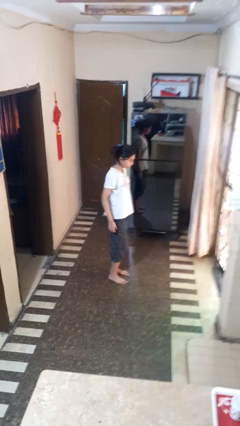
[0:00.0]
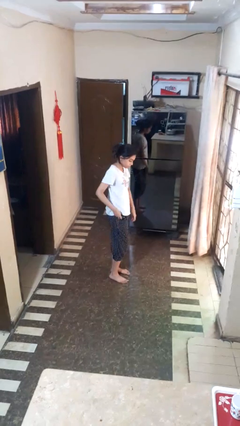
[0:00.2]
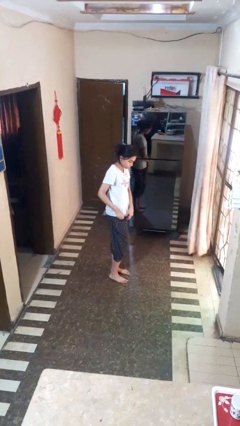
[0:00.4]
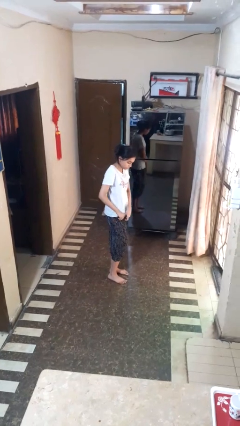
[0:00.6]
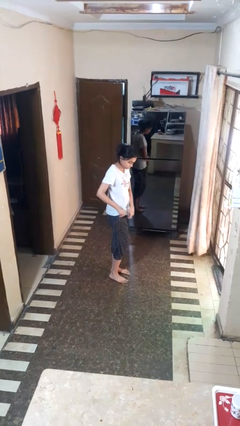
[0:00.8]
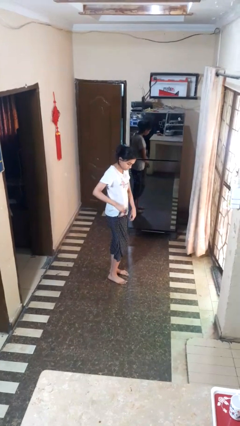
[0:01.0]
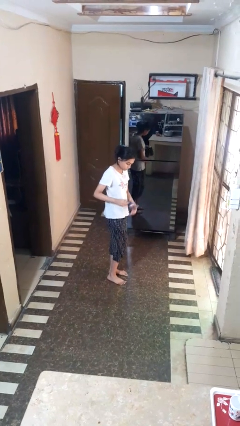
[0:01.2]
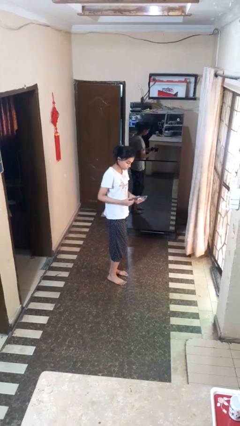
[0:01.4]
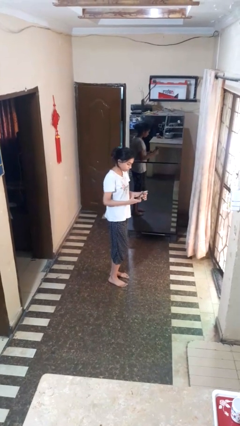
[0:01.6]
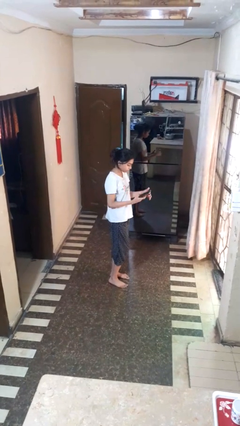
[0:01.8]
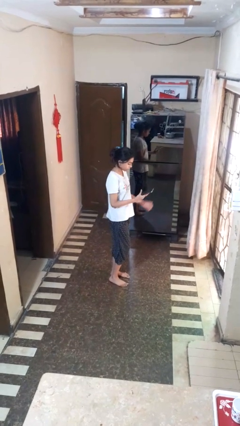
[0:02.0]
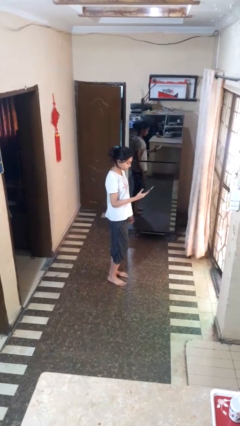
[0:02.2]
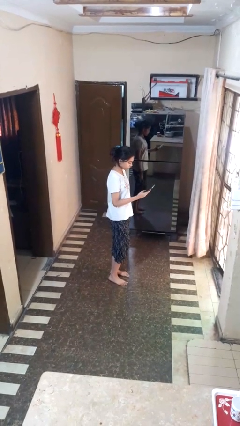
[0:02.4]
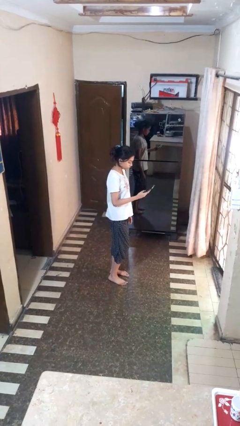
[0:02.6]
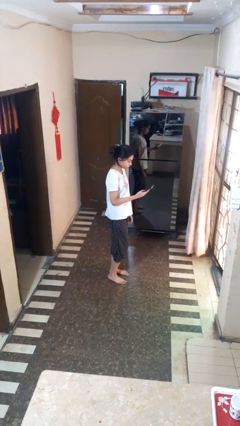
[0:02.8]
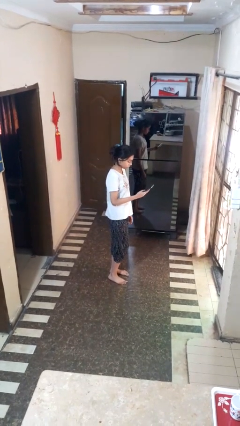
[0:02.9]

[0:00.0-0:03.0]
person takes phone from pocket

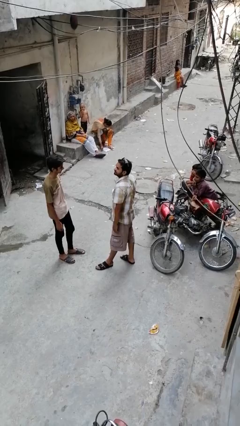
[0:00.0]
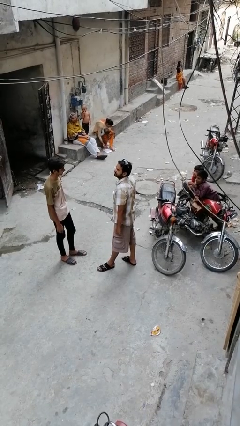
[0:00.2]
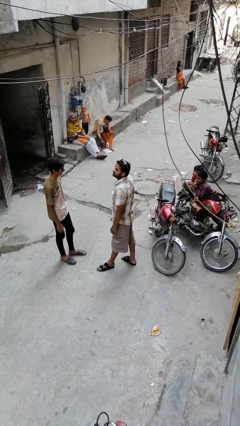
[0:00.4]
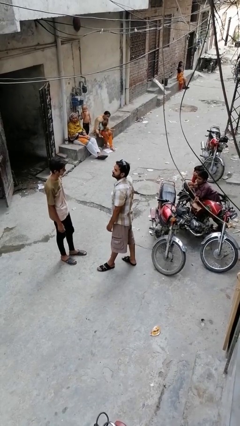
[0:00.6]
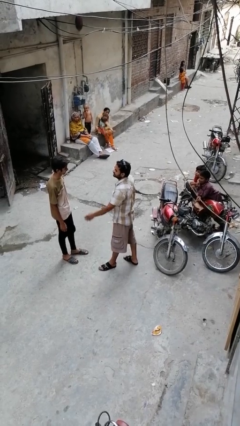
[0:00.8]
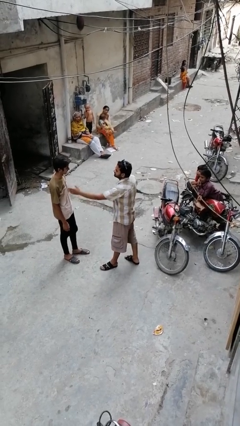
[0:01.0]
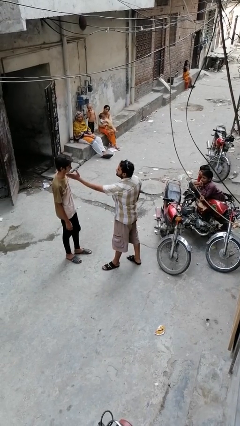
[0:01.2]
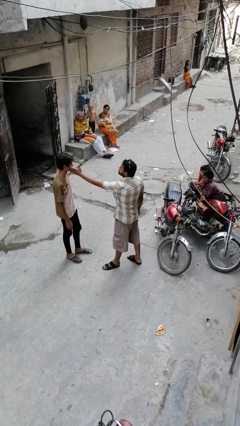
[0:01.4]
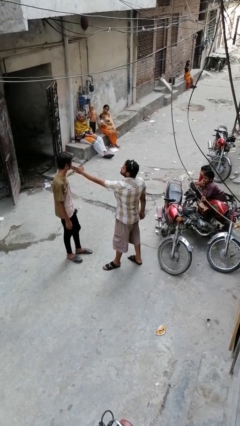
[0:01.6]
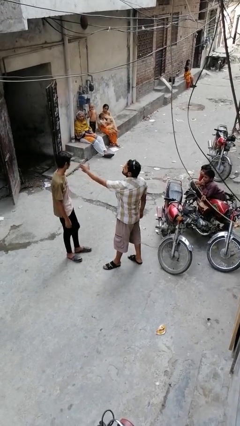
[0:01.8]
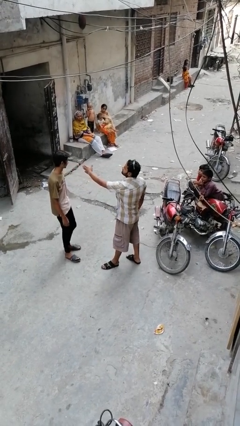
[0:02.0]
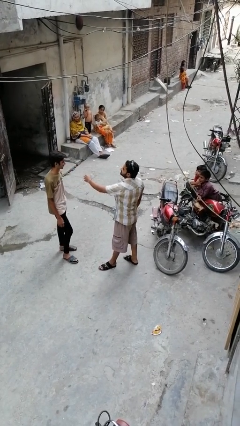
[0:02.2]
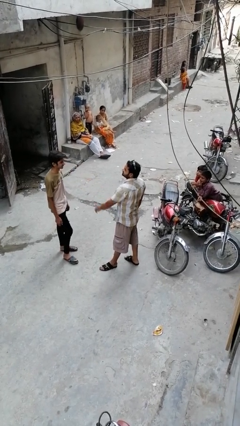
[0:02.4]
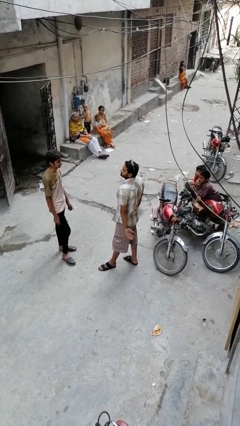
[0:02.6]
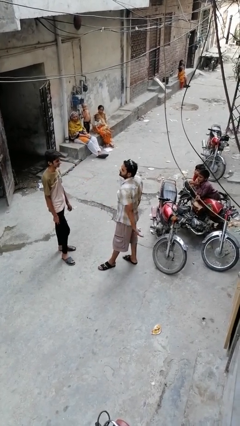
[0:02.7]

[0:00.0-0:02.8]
person touches face of person

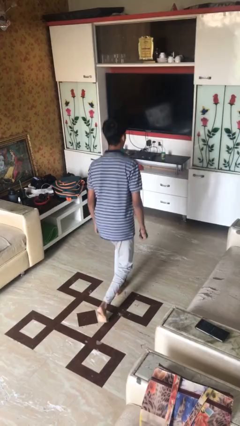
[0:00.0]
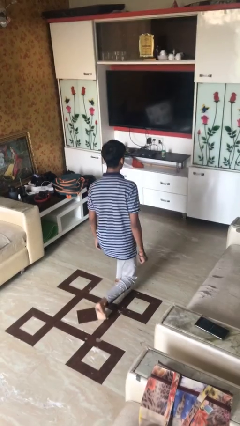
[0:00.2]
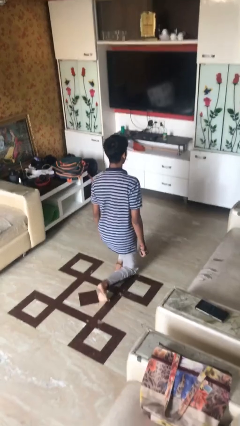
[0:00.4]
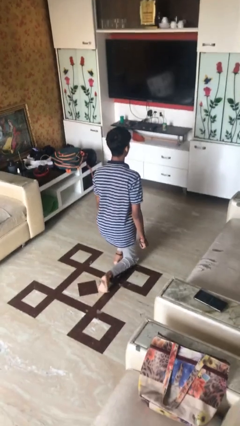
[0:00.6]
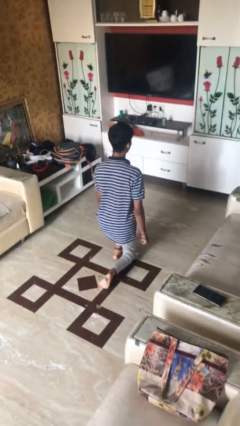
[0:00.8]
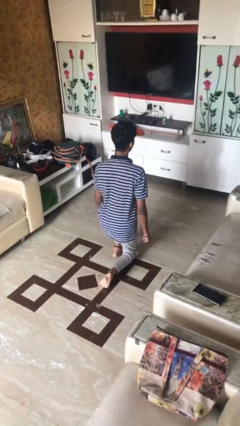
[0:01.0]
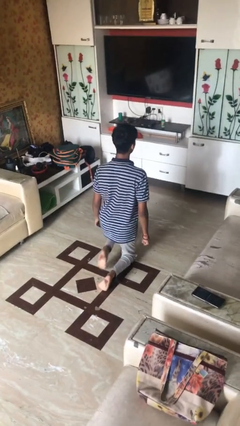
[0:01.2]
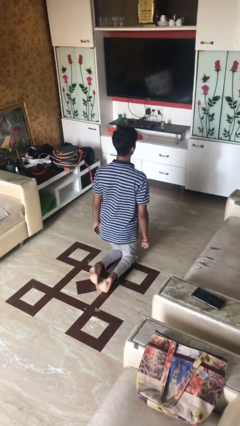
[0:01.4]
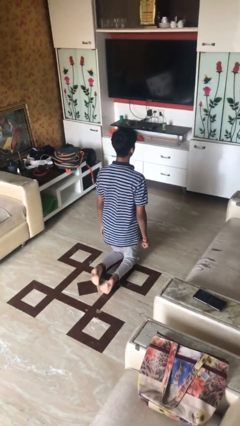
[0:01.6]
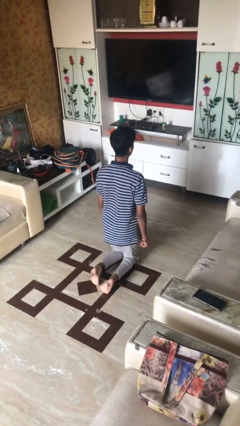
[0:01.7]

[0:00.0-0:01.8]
person kneels

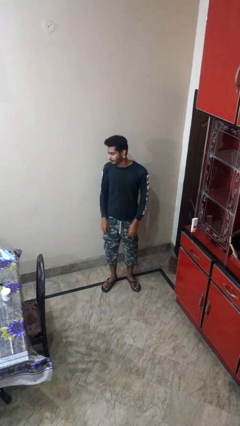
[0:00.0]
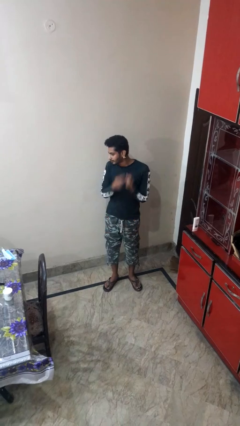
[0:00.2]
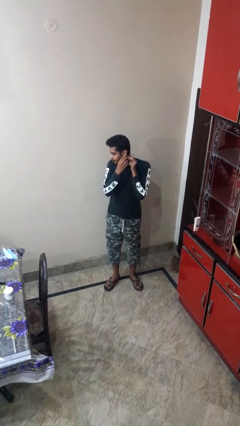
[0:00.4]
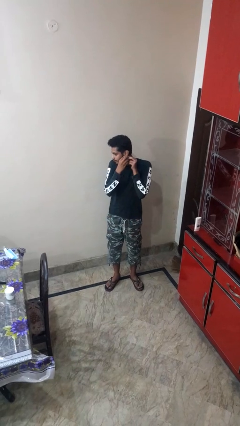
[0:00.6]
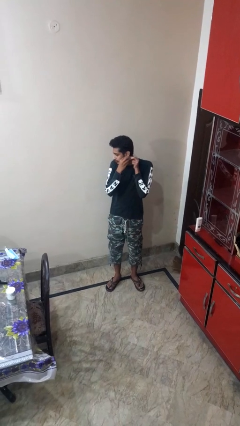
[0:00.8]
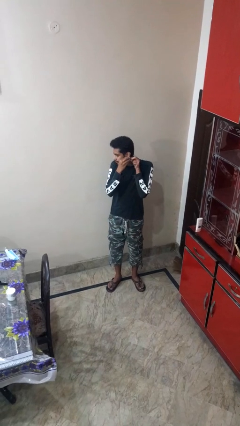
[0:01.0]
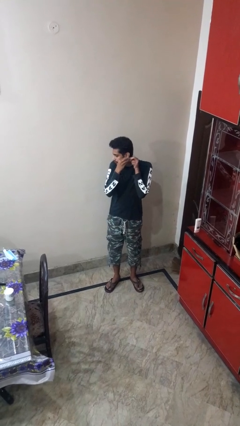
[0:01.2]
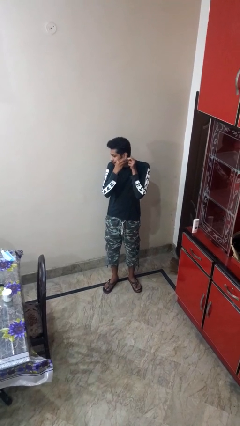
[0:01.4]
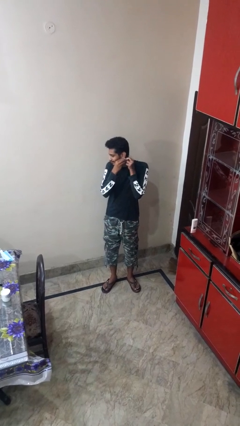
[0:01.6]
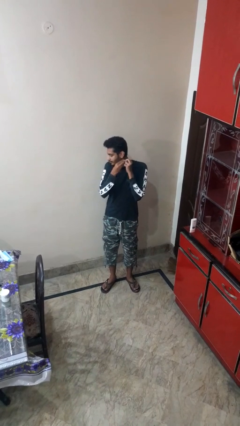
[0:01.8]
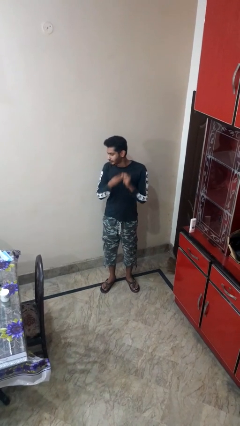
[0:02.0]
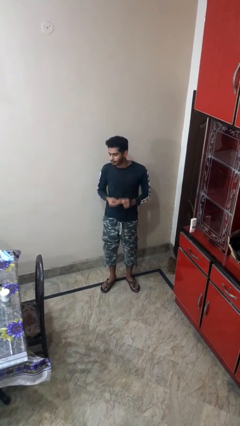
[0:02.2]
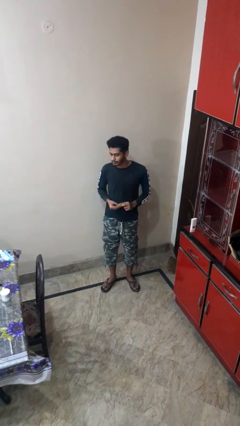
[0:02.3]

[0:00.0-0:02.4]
person takes off earrings

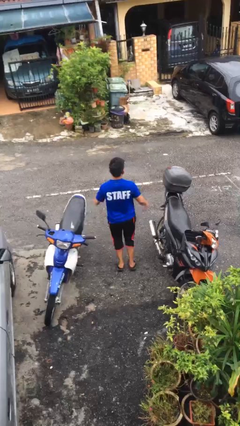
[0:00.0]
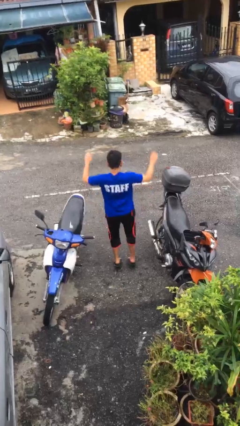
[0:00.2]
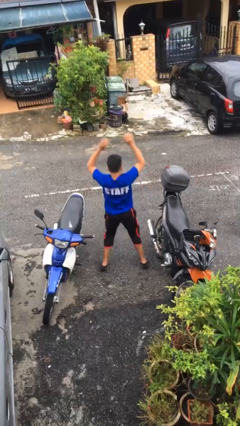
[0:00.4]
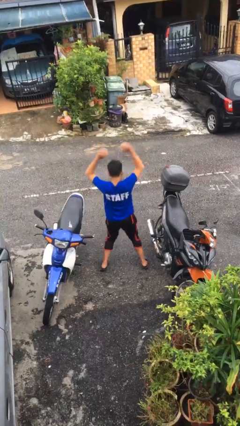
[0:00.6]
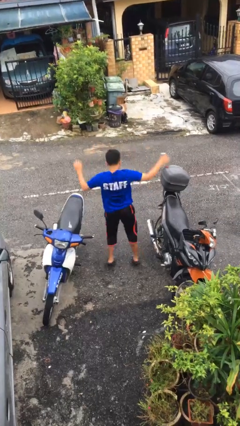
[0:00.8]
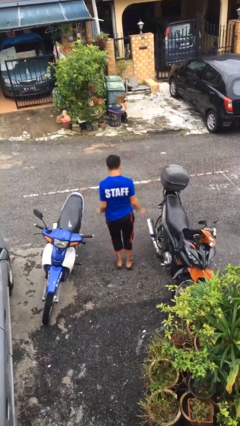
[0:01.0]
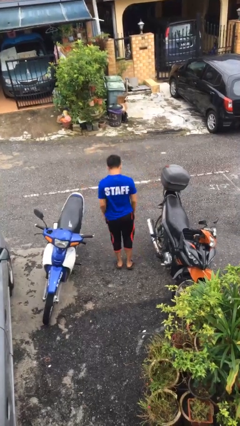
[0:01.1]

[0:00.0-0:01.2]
person exercises with jumping jacks

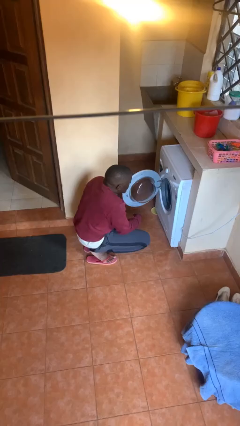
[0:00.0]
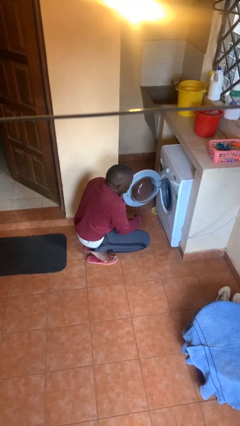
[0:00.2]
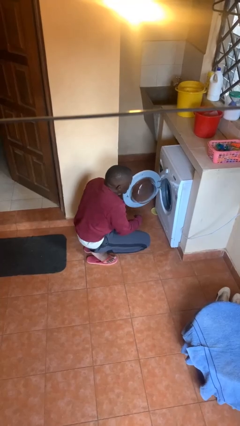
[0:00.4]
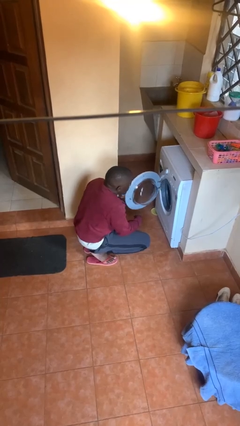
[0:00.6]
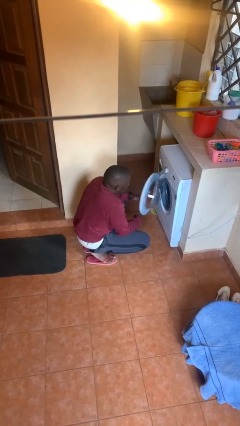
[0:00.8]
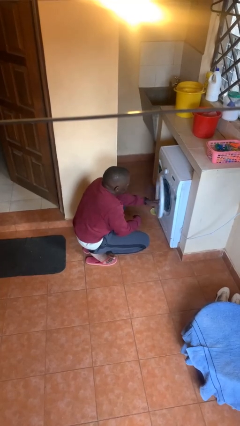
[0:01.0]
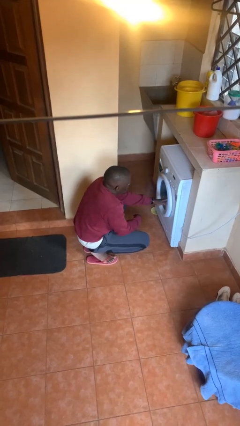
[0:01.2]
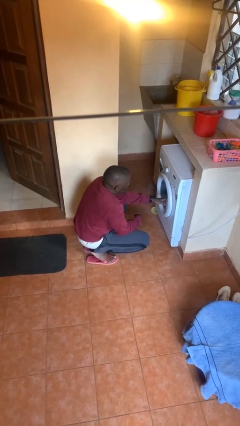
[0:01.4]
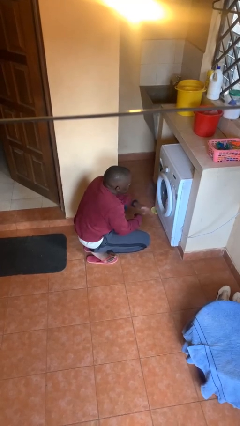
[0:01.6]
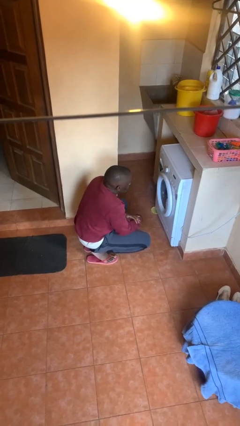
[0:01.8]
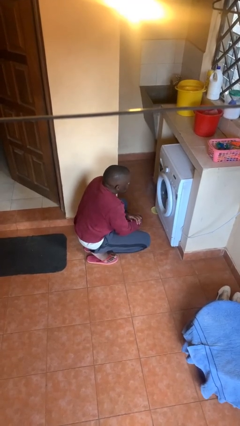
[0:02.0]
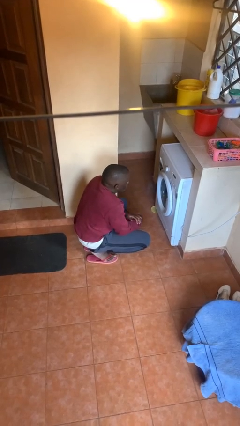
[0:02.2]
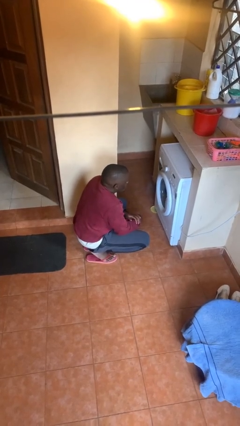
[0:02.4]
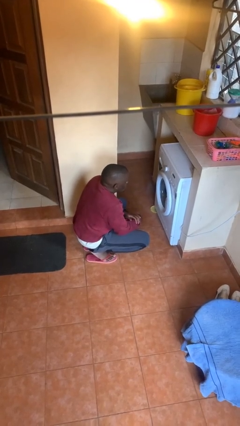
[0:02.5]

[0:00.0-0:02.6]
person closes clothes washer

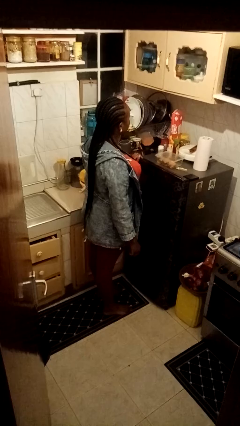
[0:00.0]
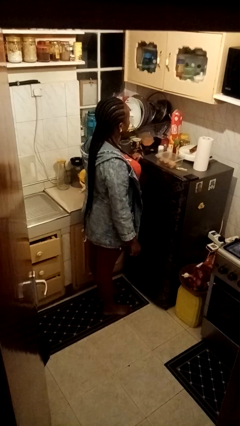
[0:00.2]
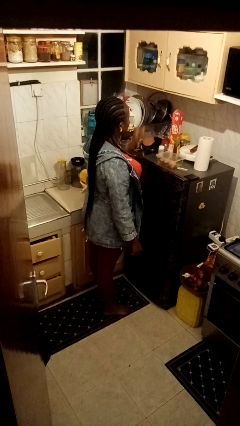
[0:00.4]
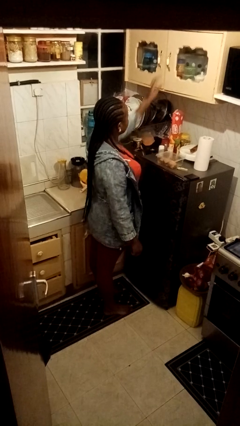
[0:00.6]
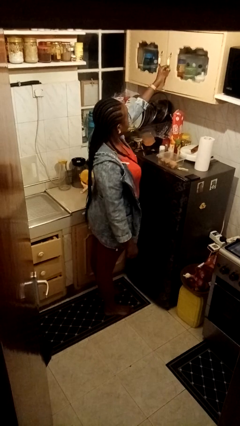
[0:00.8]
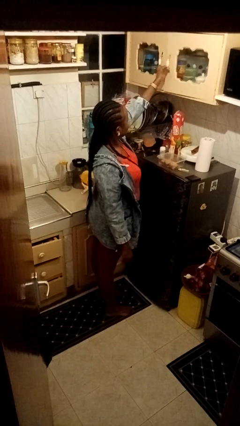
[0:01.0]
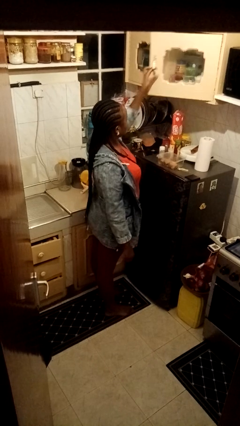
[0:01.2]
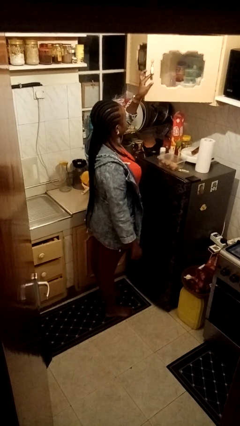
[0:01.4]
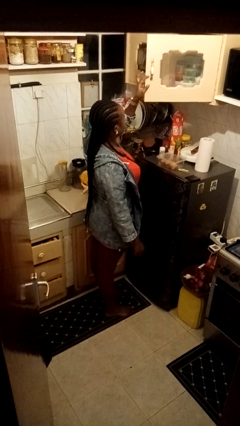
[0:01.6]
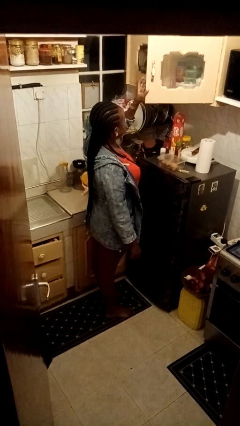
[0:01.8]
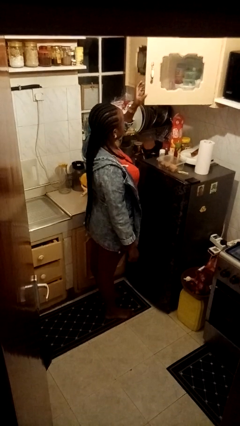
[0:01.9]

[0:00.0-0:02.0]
person opens cabinet
